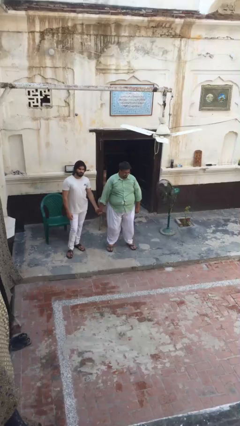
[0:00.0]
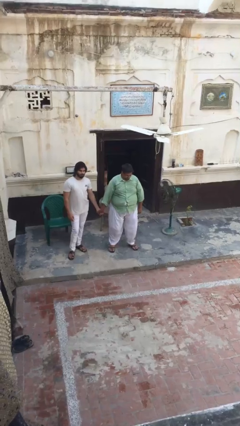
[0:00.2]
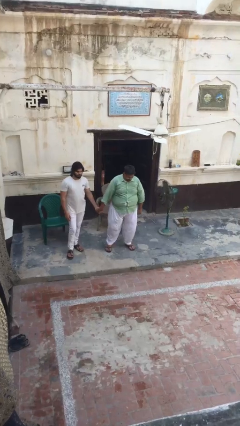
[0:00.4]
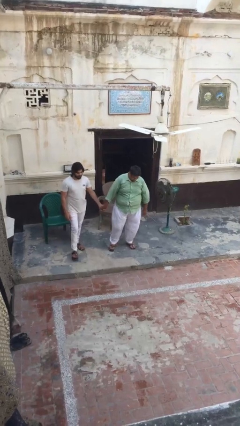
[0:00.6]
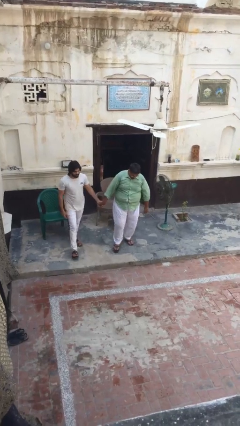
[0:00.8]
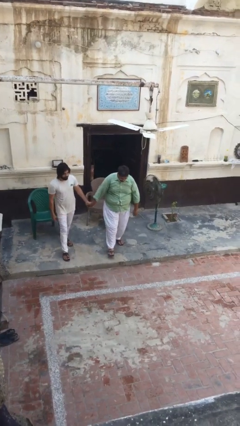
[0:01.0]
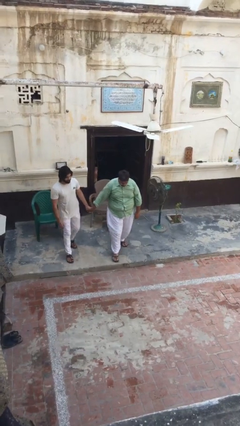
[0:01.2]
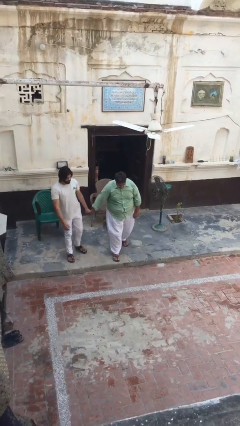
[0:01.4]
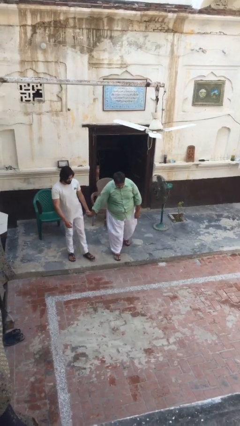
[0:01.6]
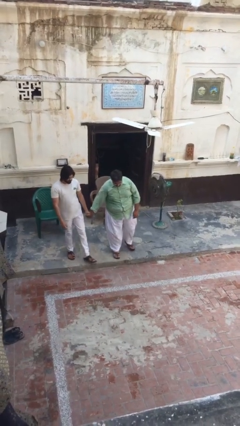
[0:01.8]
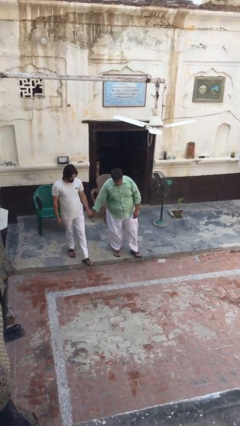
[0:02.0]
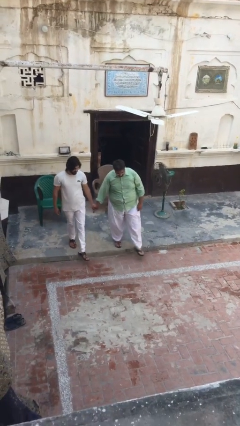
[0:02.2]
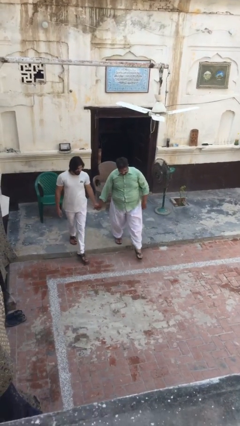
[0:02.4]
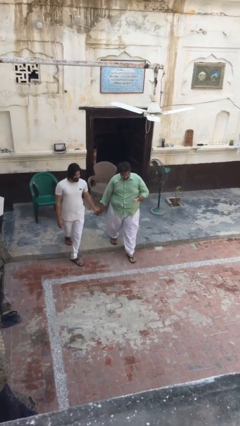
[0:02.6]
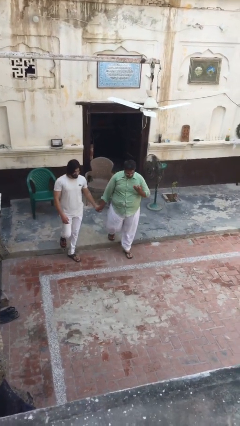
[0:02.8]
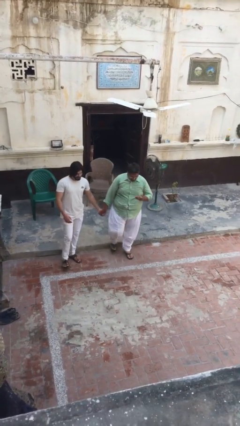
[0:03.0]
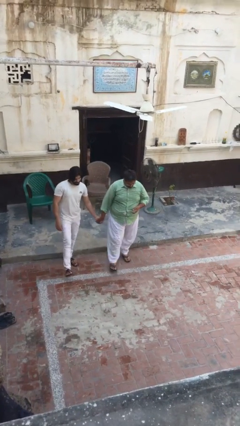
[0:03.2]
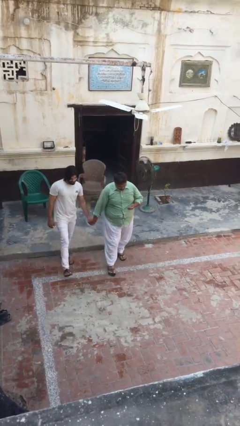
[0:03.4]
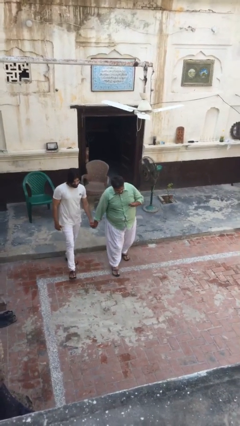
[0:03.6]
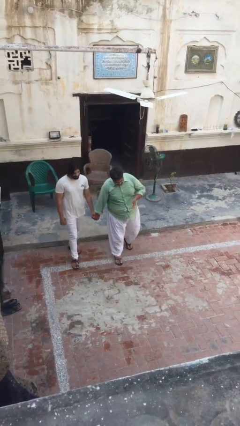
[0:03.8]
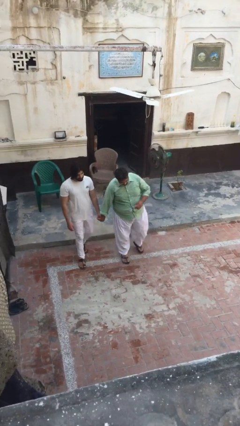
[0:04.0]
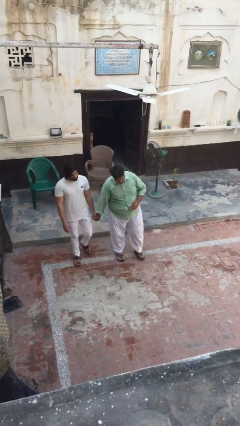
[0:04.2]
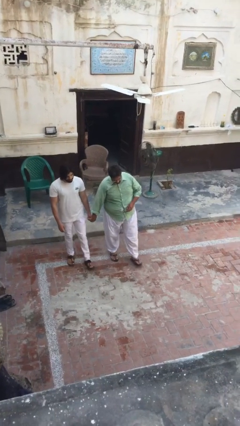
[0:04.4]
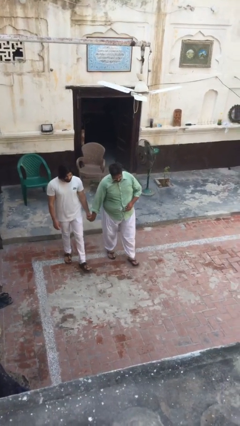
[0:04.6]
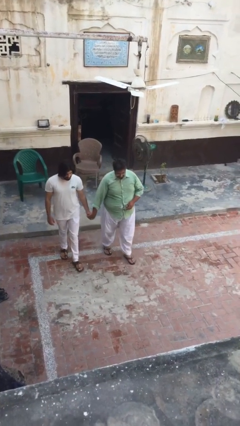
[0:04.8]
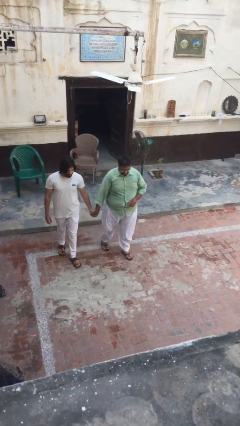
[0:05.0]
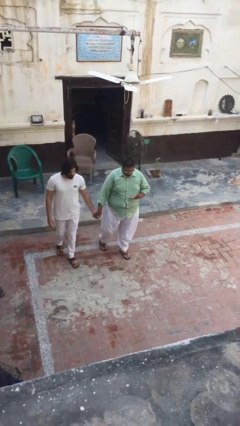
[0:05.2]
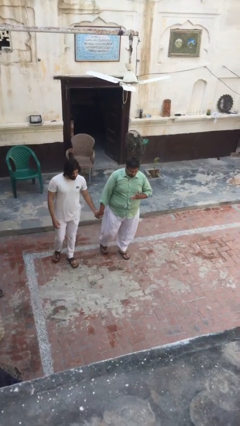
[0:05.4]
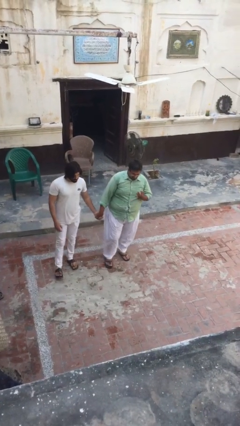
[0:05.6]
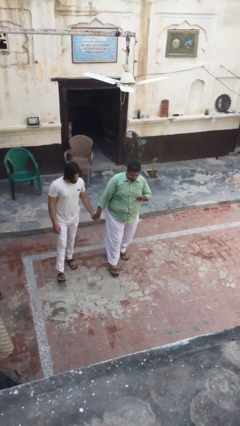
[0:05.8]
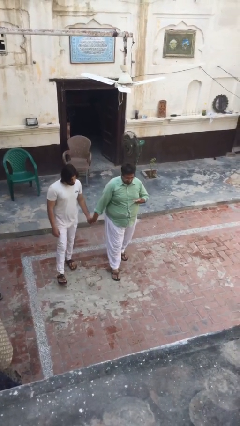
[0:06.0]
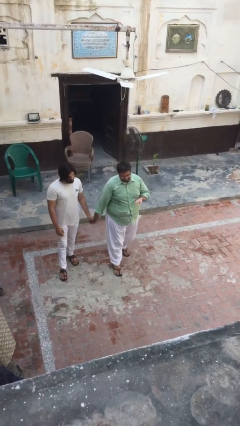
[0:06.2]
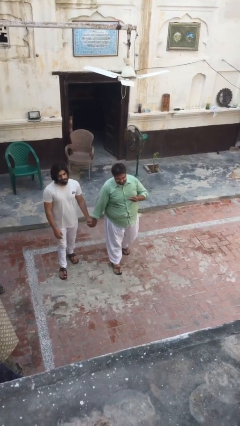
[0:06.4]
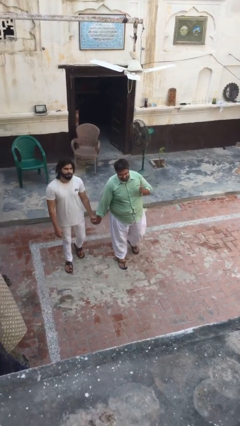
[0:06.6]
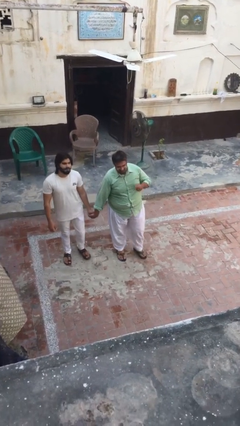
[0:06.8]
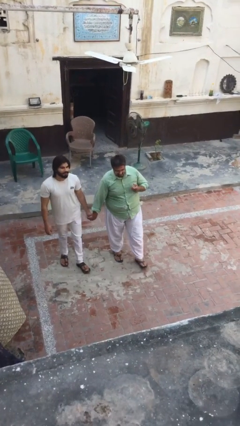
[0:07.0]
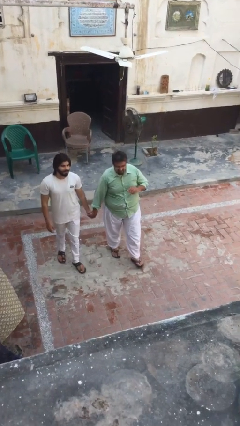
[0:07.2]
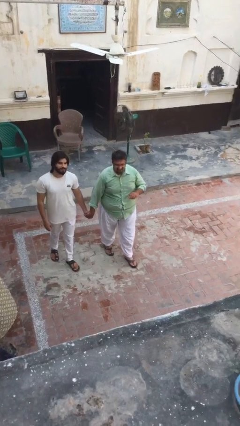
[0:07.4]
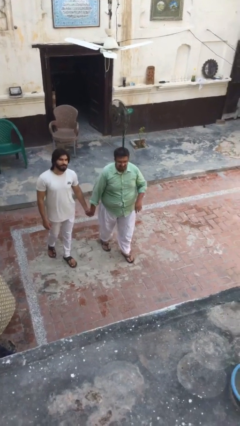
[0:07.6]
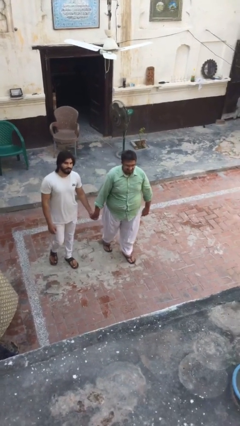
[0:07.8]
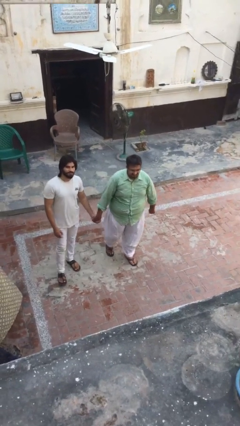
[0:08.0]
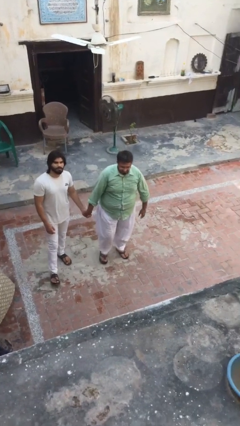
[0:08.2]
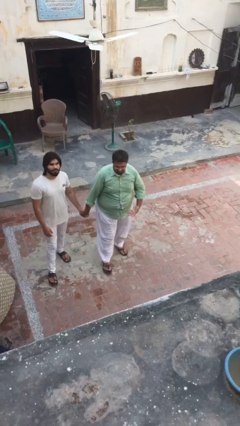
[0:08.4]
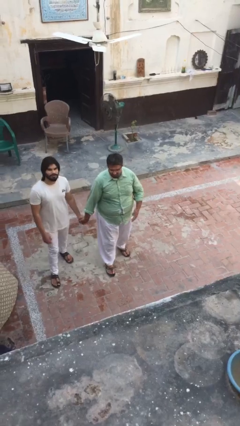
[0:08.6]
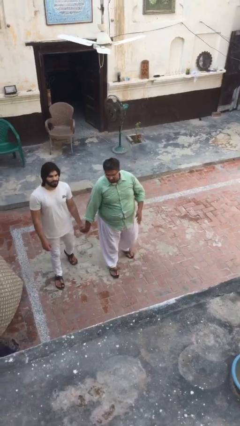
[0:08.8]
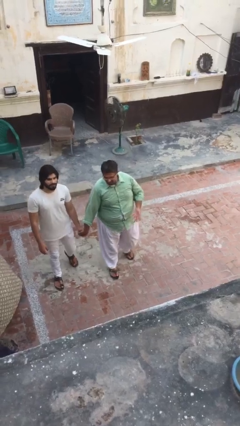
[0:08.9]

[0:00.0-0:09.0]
person holds hand

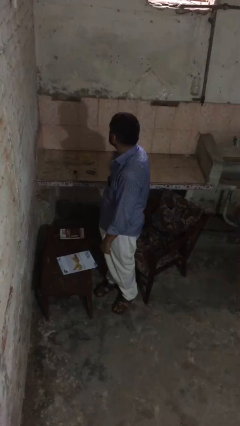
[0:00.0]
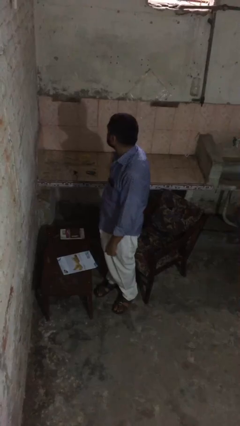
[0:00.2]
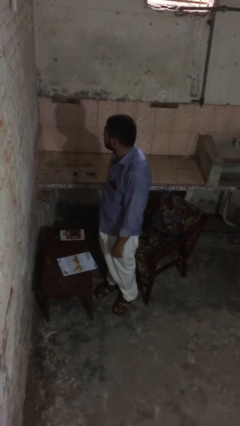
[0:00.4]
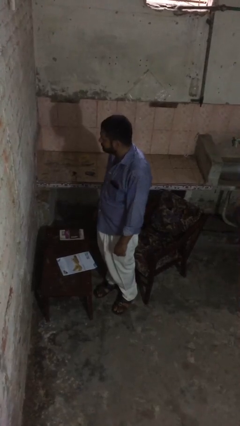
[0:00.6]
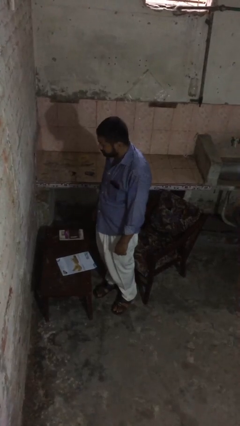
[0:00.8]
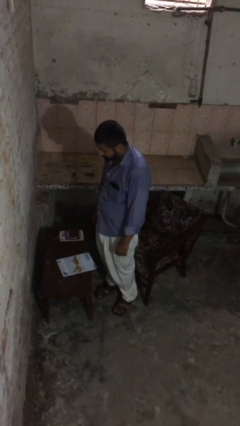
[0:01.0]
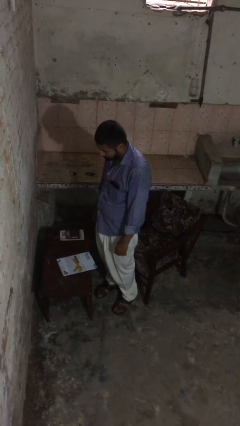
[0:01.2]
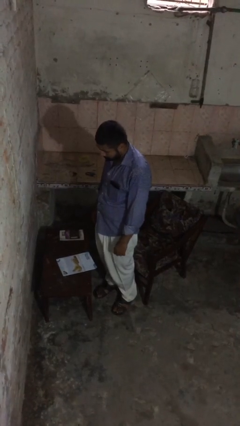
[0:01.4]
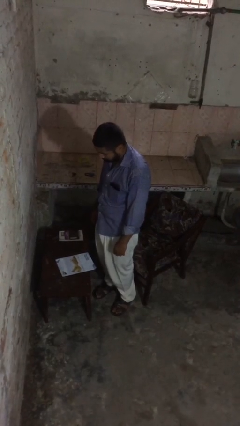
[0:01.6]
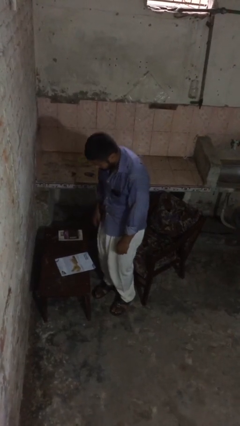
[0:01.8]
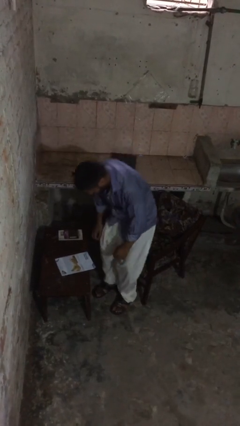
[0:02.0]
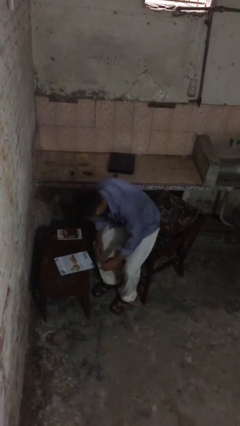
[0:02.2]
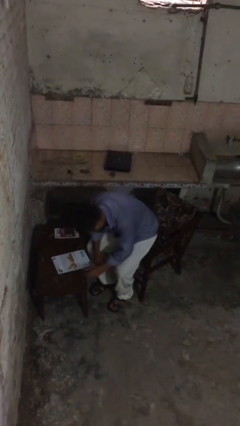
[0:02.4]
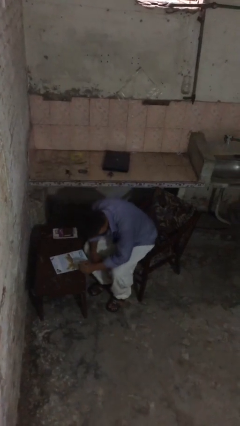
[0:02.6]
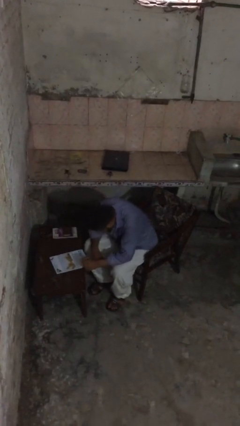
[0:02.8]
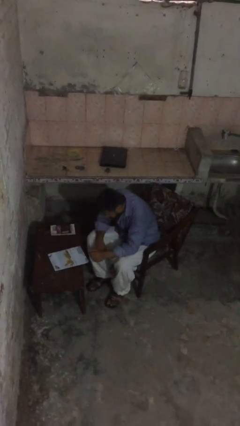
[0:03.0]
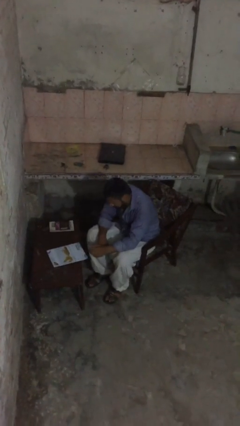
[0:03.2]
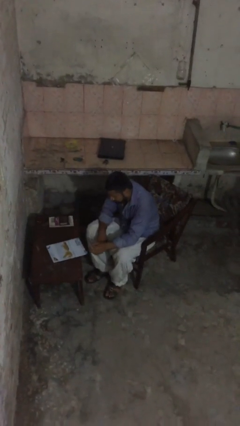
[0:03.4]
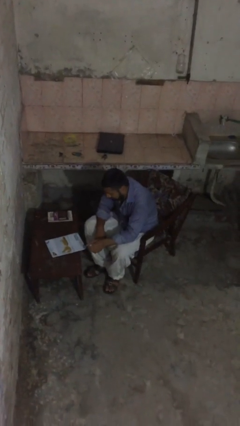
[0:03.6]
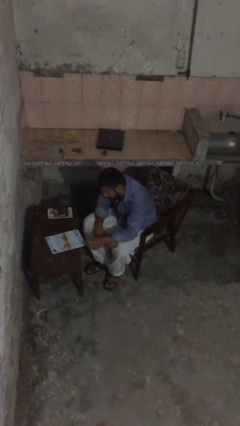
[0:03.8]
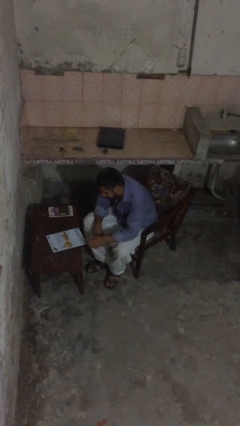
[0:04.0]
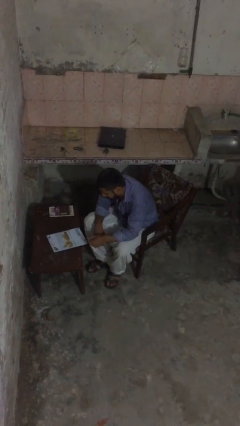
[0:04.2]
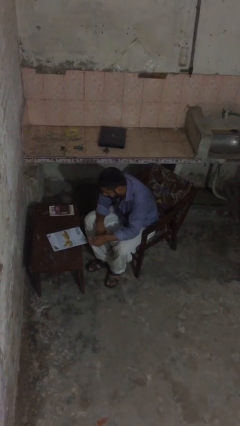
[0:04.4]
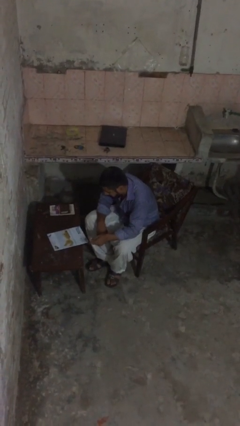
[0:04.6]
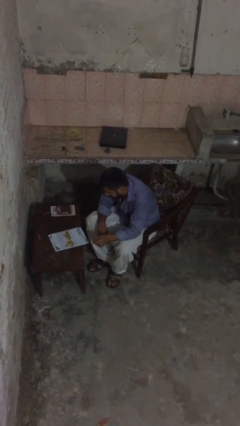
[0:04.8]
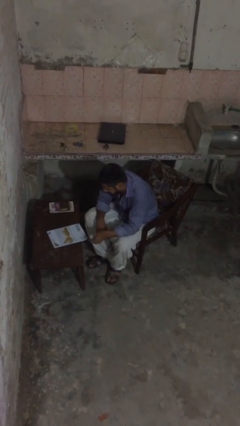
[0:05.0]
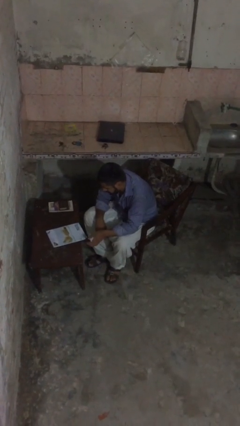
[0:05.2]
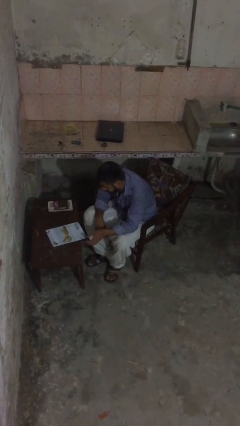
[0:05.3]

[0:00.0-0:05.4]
person sits down

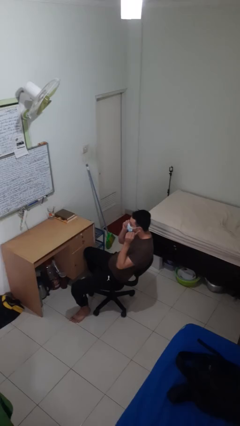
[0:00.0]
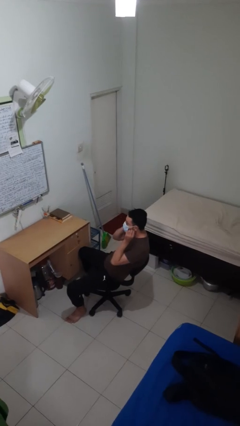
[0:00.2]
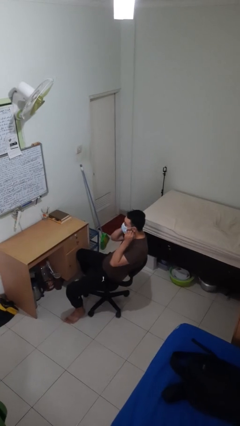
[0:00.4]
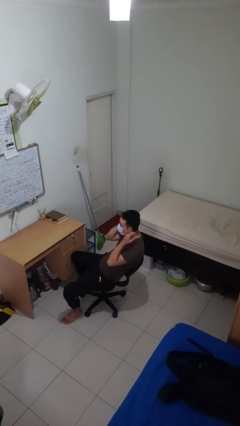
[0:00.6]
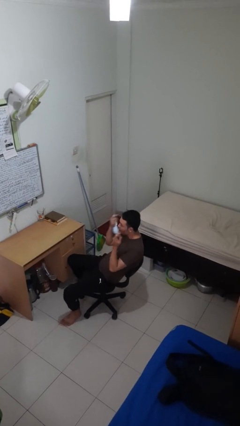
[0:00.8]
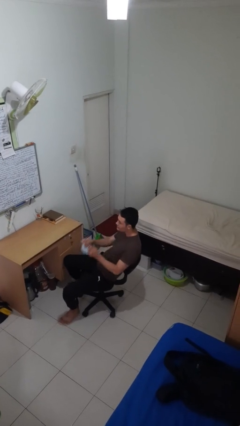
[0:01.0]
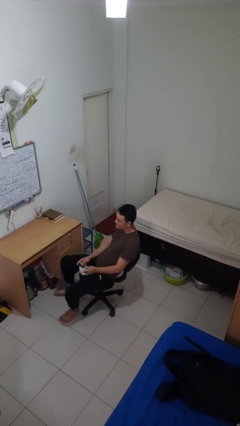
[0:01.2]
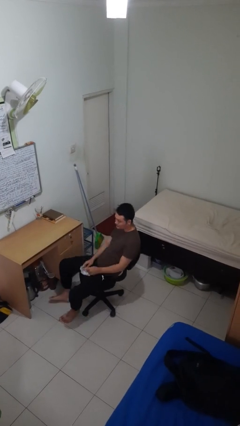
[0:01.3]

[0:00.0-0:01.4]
person takes off facemask

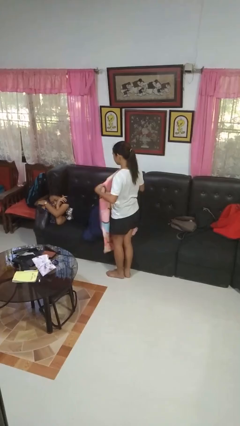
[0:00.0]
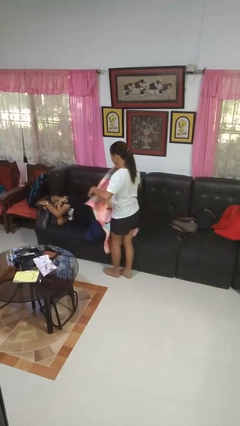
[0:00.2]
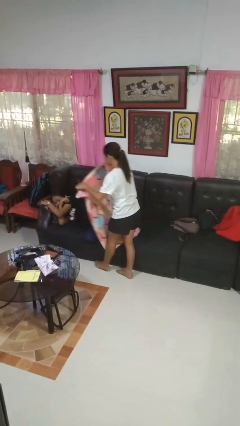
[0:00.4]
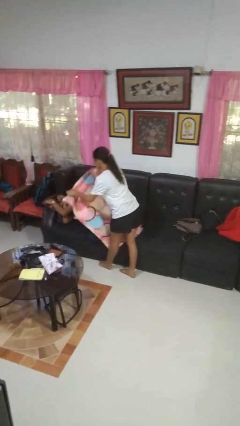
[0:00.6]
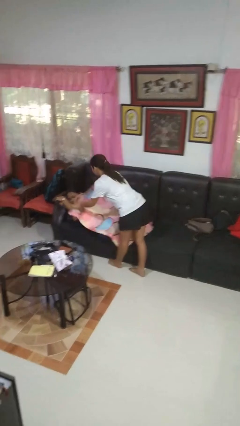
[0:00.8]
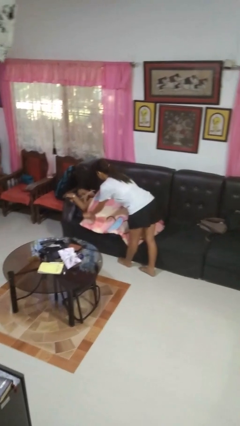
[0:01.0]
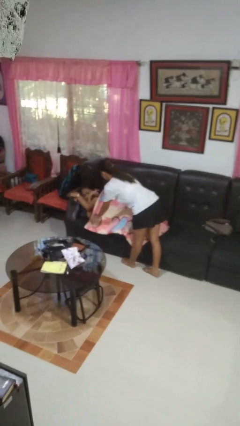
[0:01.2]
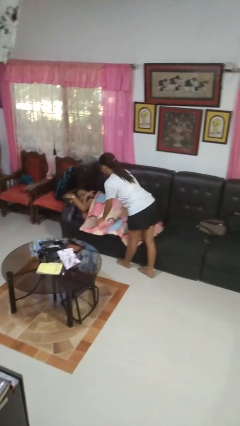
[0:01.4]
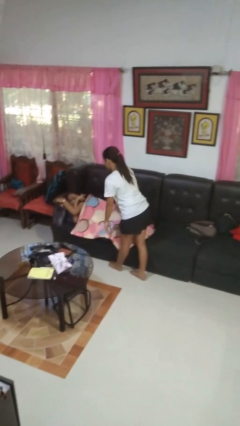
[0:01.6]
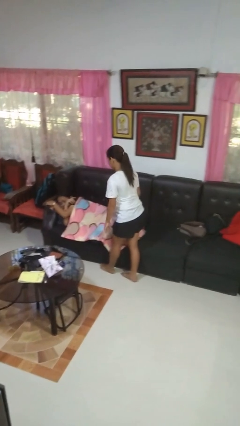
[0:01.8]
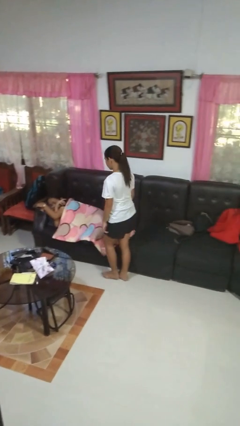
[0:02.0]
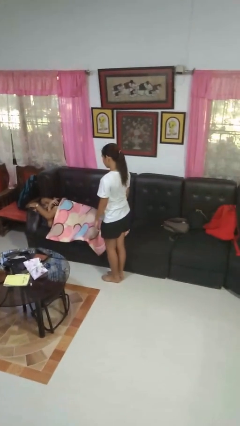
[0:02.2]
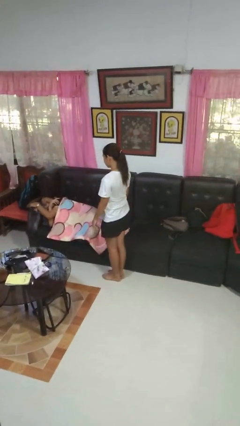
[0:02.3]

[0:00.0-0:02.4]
person covers friend with blanket
